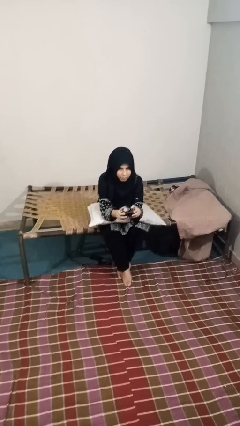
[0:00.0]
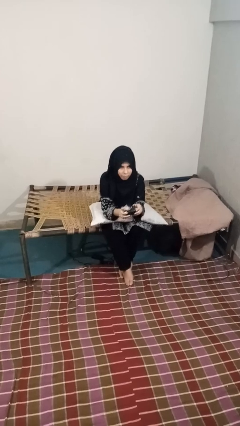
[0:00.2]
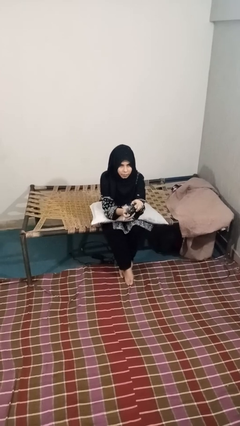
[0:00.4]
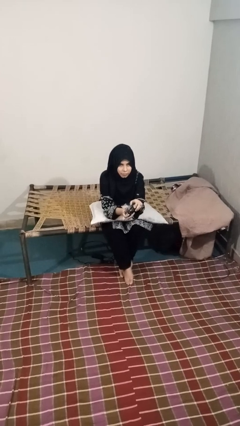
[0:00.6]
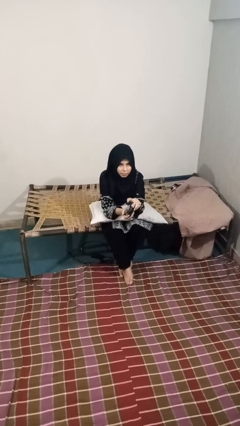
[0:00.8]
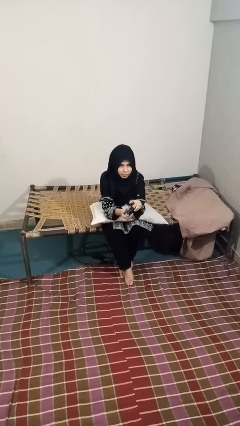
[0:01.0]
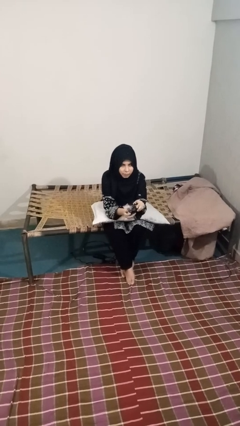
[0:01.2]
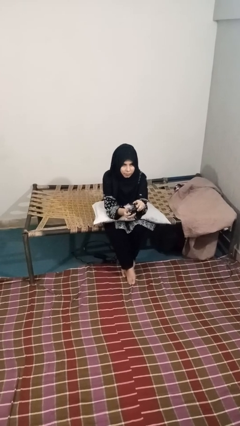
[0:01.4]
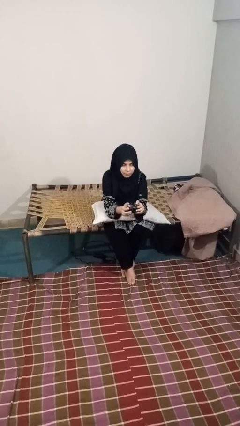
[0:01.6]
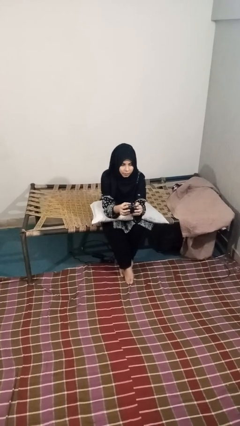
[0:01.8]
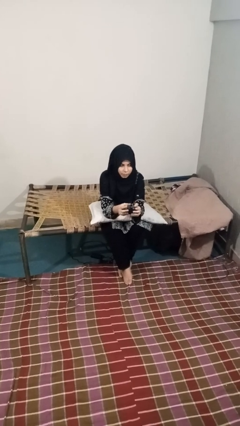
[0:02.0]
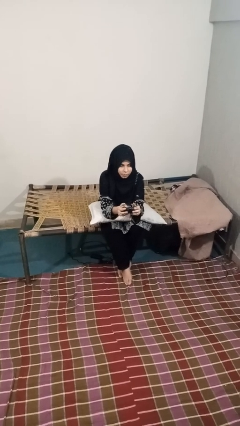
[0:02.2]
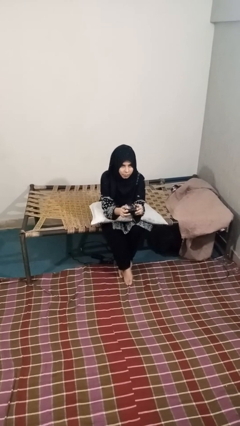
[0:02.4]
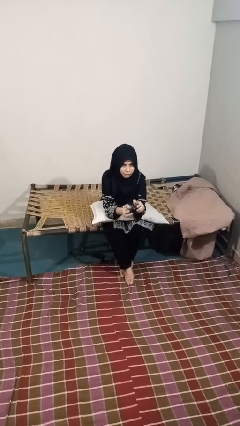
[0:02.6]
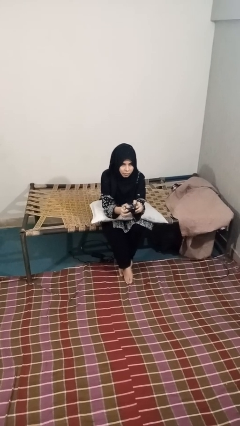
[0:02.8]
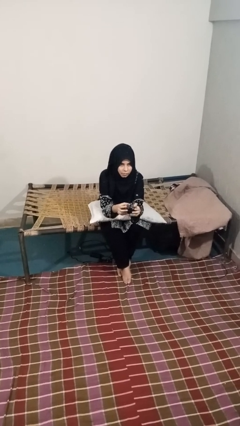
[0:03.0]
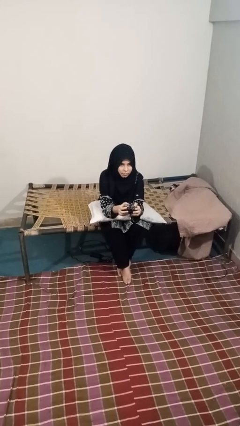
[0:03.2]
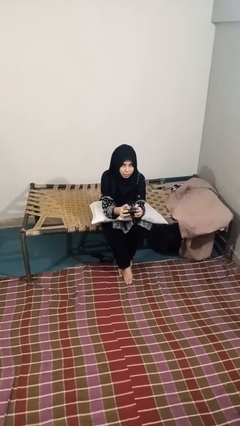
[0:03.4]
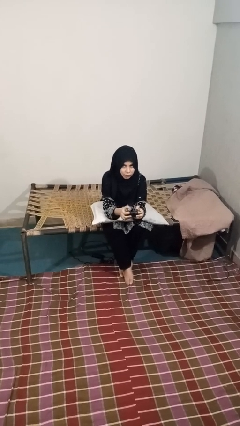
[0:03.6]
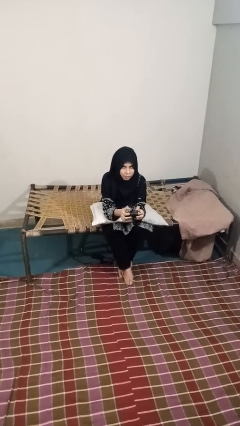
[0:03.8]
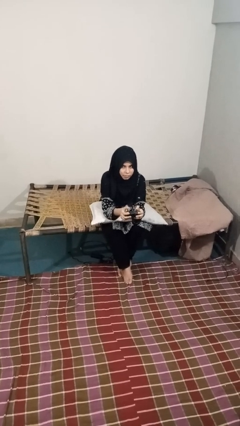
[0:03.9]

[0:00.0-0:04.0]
person interacts with handheld game

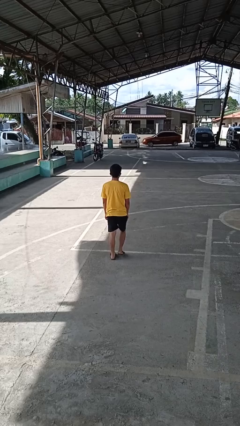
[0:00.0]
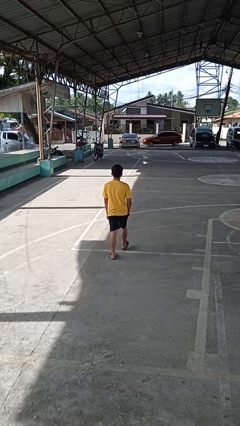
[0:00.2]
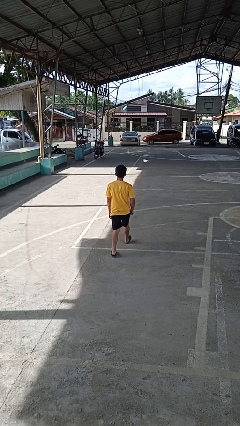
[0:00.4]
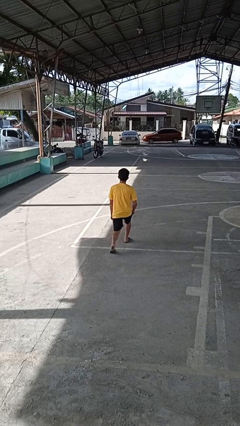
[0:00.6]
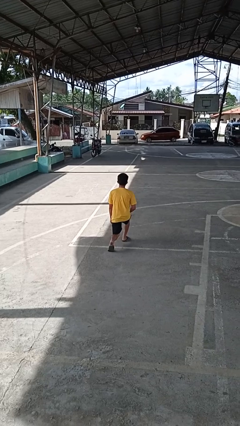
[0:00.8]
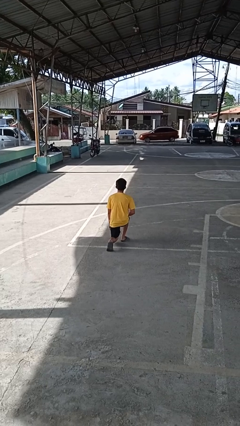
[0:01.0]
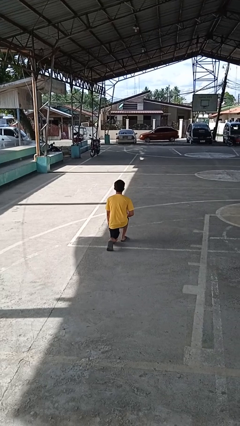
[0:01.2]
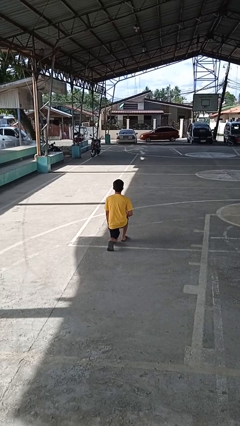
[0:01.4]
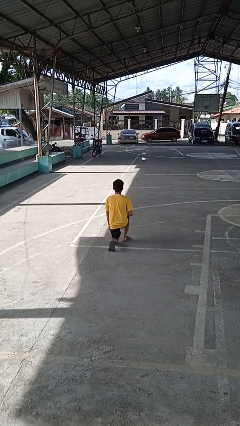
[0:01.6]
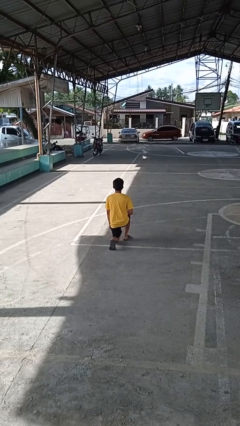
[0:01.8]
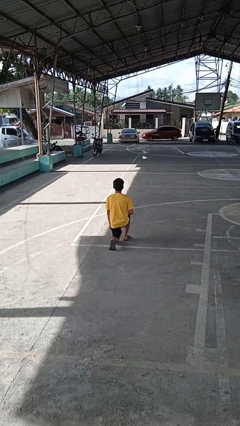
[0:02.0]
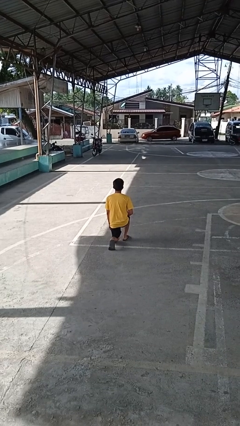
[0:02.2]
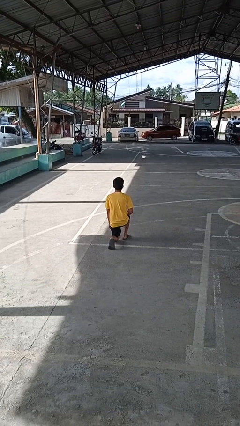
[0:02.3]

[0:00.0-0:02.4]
person kneels

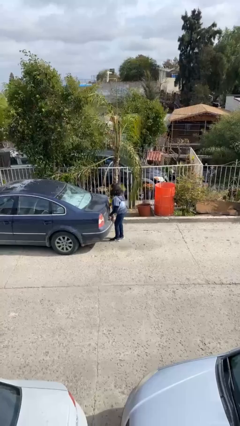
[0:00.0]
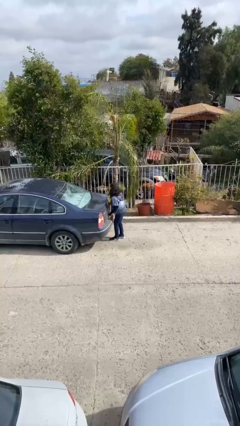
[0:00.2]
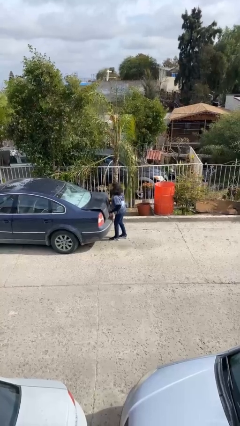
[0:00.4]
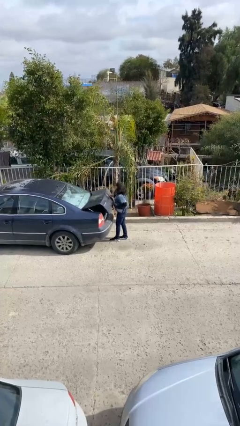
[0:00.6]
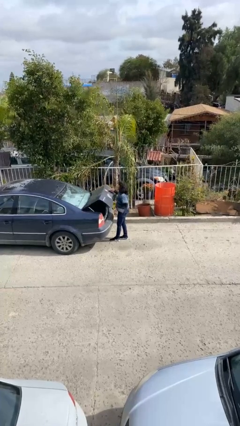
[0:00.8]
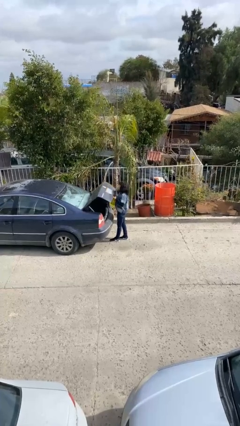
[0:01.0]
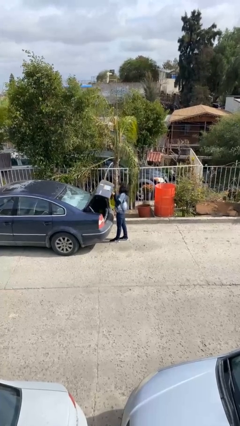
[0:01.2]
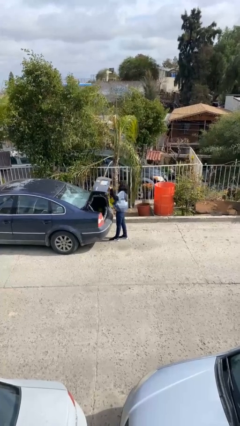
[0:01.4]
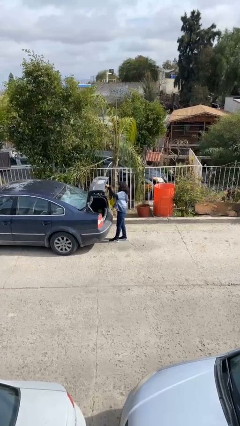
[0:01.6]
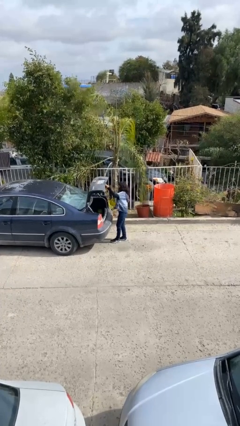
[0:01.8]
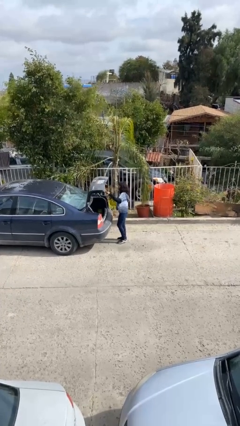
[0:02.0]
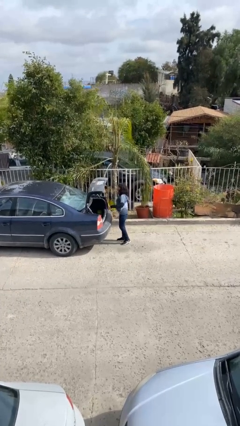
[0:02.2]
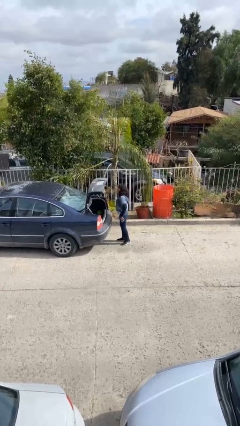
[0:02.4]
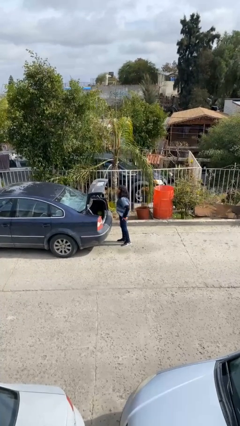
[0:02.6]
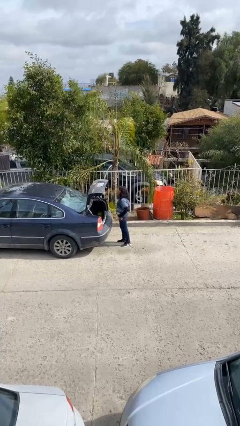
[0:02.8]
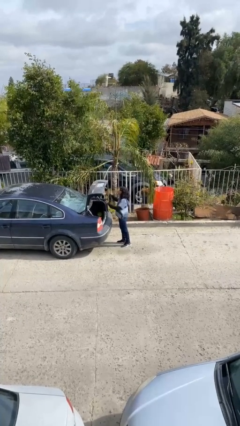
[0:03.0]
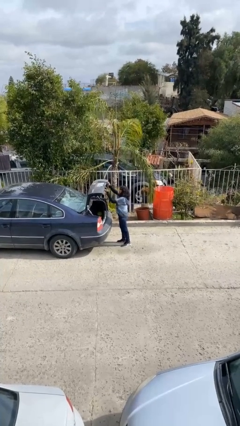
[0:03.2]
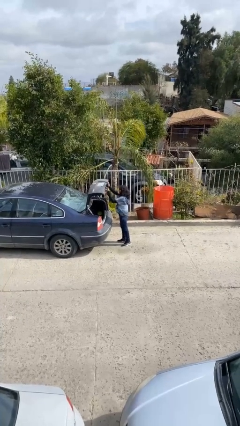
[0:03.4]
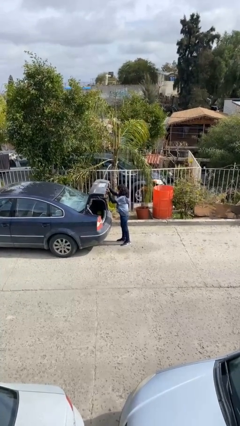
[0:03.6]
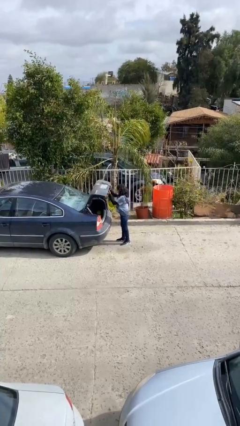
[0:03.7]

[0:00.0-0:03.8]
person opens car trunk

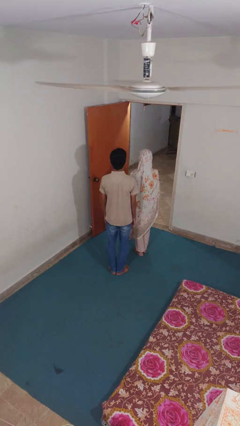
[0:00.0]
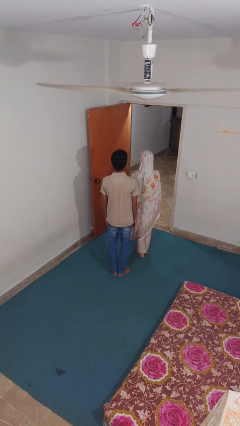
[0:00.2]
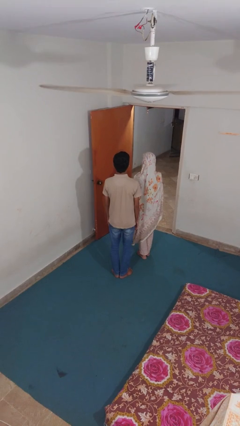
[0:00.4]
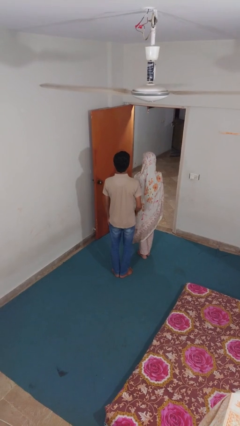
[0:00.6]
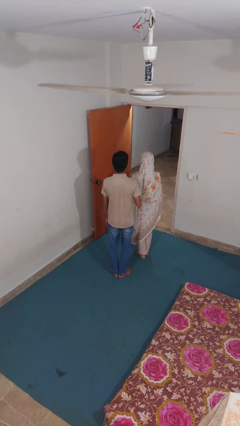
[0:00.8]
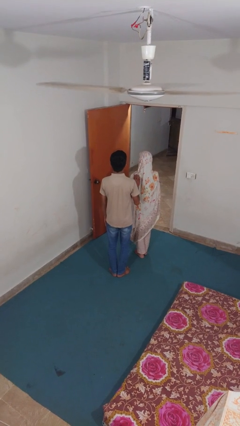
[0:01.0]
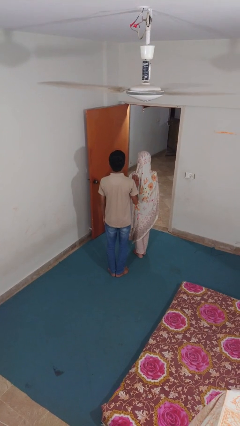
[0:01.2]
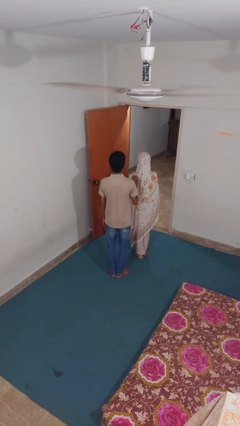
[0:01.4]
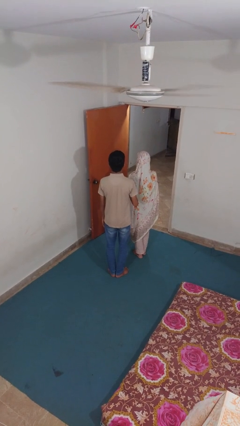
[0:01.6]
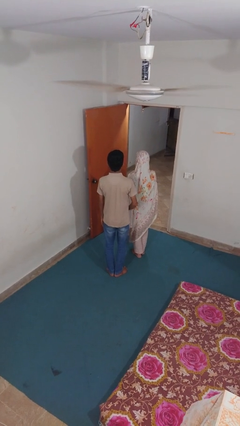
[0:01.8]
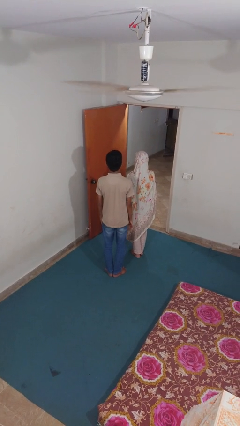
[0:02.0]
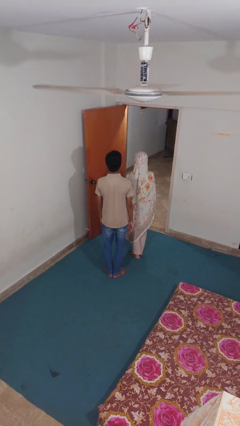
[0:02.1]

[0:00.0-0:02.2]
person touches back of person

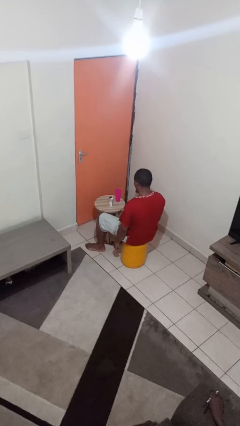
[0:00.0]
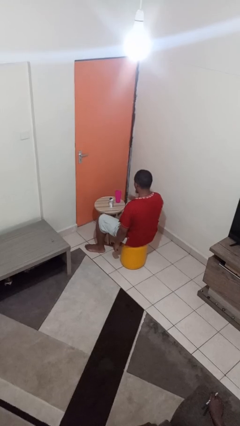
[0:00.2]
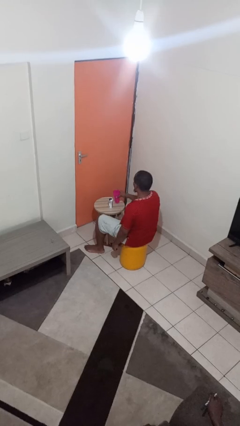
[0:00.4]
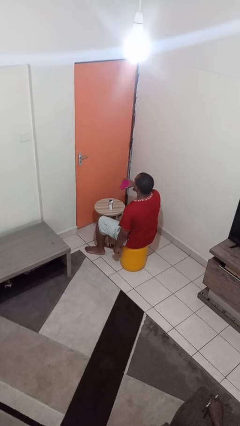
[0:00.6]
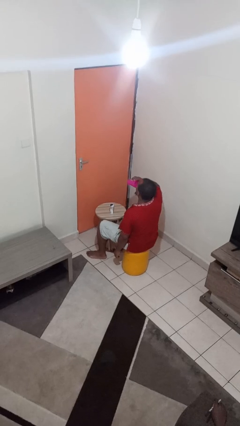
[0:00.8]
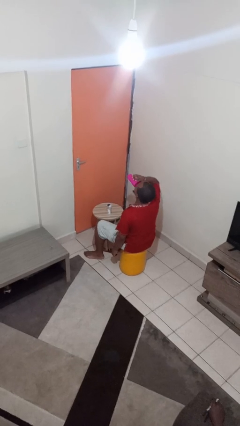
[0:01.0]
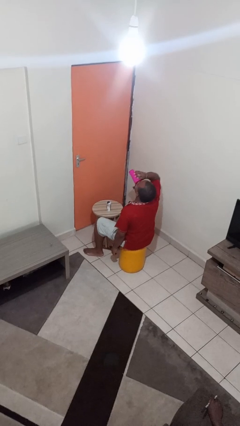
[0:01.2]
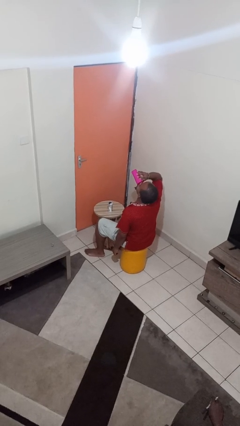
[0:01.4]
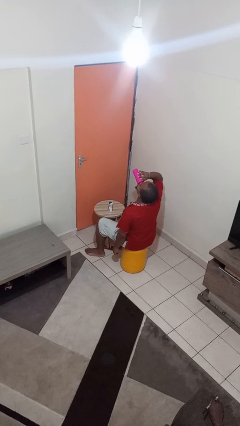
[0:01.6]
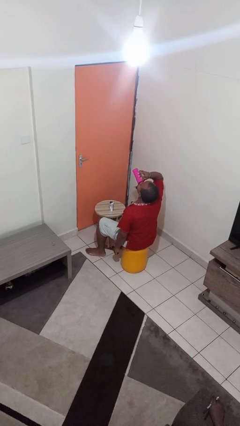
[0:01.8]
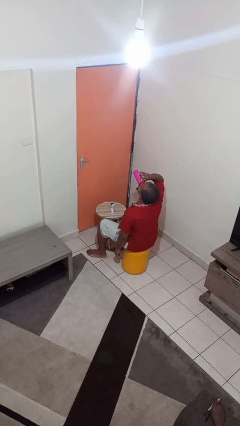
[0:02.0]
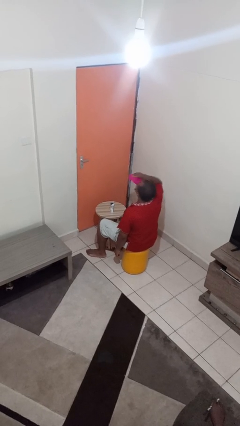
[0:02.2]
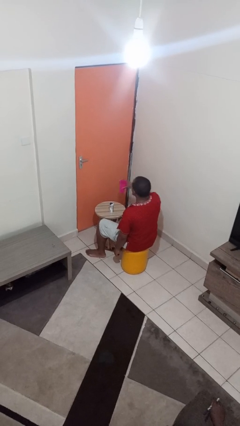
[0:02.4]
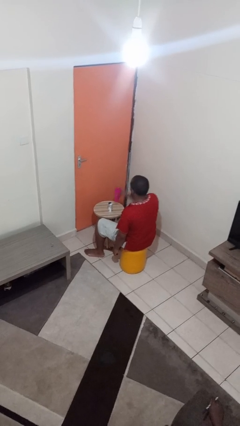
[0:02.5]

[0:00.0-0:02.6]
person drinks from cup

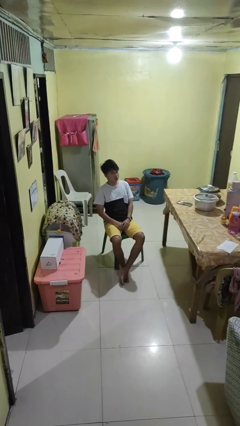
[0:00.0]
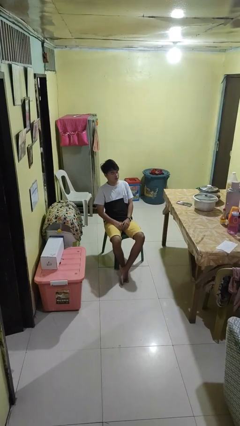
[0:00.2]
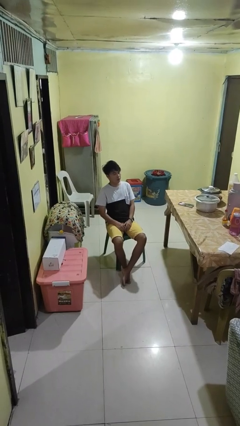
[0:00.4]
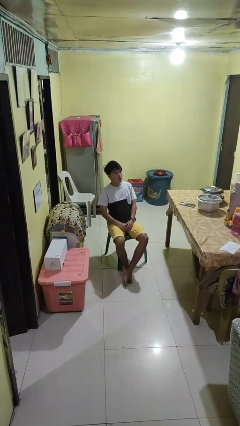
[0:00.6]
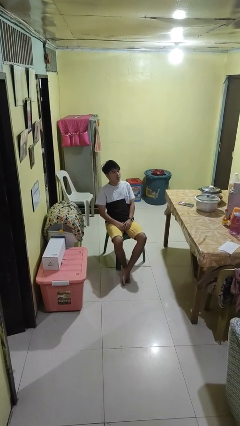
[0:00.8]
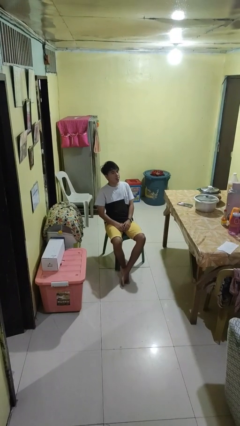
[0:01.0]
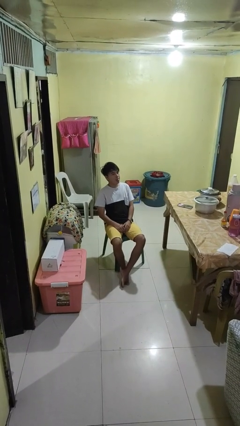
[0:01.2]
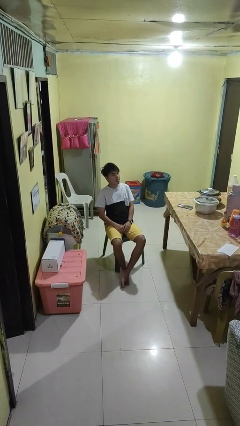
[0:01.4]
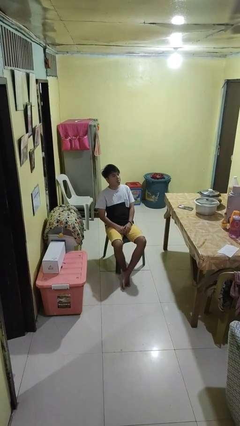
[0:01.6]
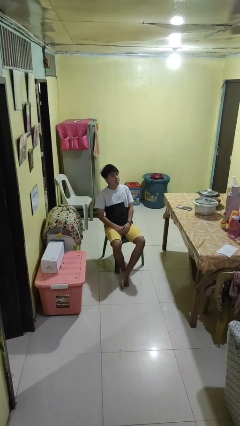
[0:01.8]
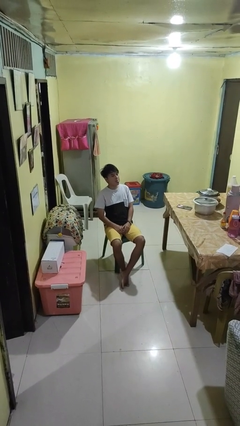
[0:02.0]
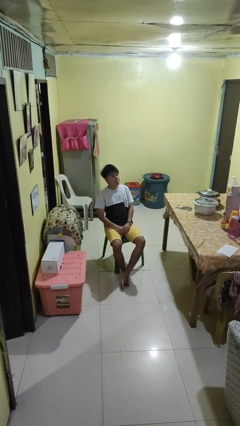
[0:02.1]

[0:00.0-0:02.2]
person sticks out tongue
